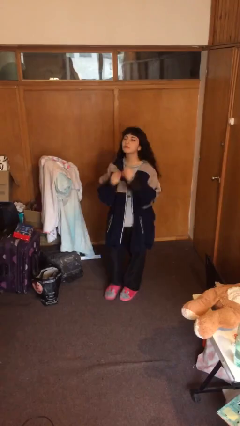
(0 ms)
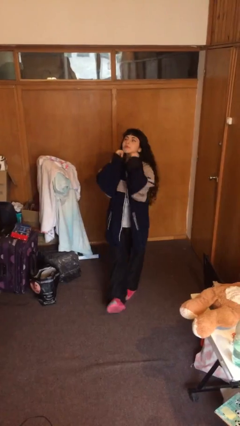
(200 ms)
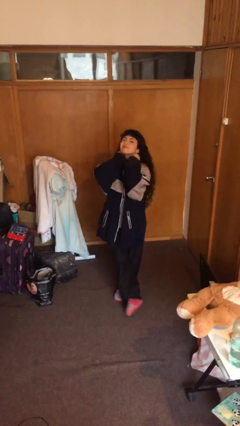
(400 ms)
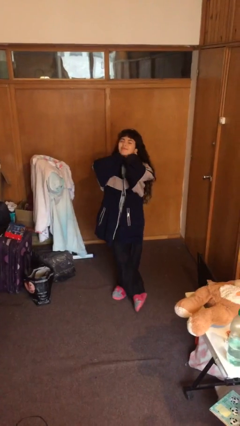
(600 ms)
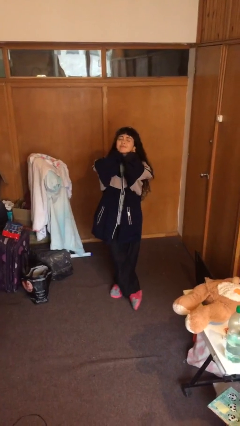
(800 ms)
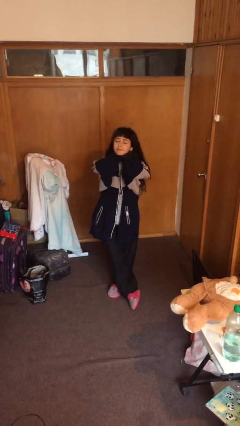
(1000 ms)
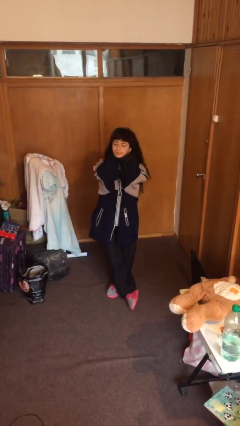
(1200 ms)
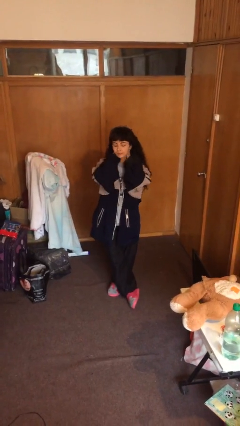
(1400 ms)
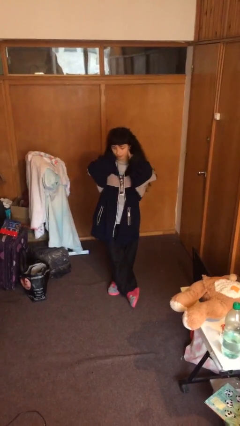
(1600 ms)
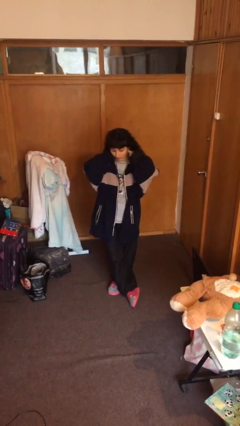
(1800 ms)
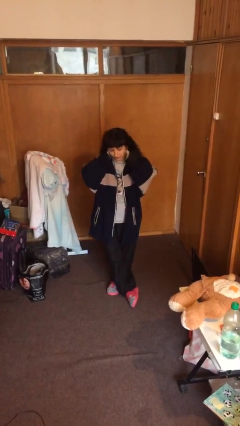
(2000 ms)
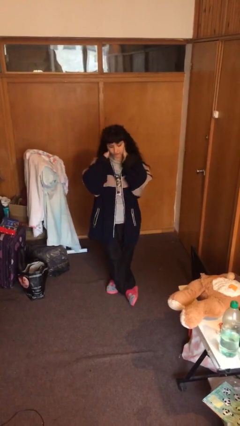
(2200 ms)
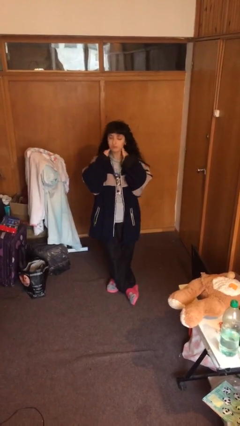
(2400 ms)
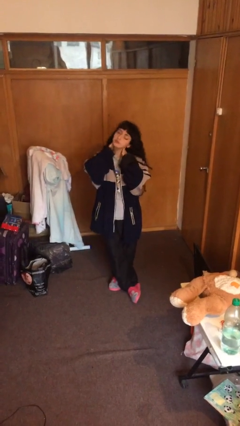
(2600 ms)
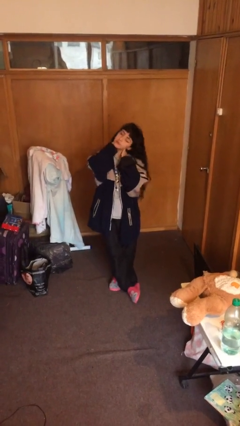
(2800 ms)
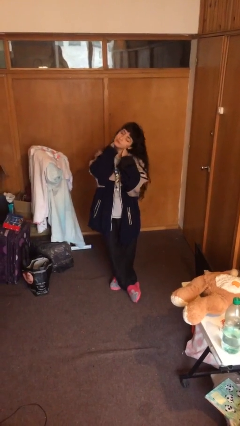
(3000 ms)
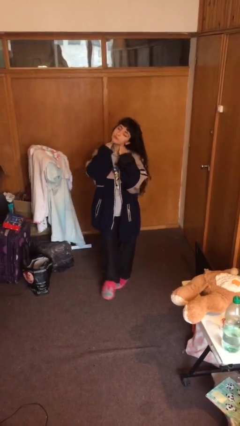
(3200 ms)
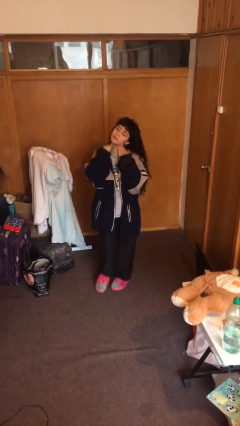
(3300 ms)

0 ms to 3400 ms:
person rubs neck

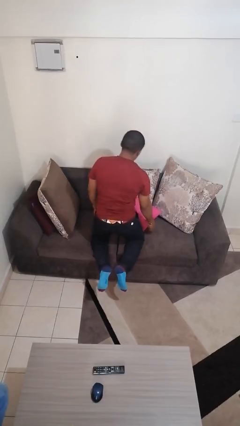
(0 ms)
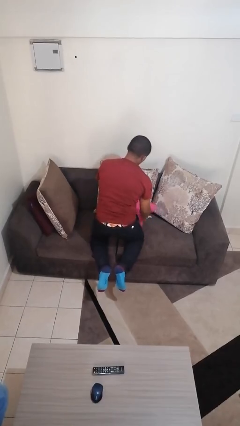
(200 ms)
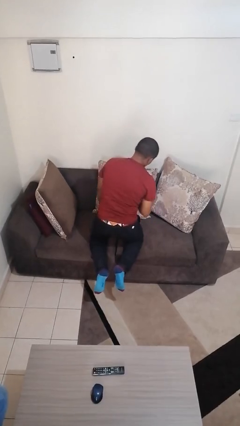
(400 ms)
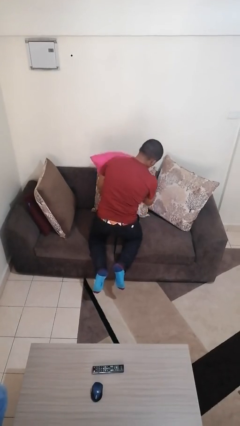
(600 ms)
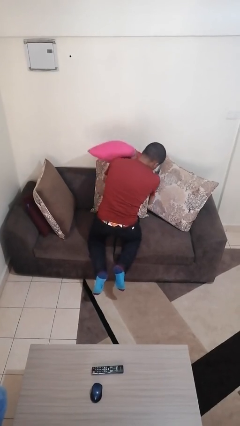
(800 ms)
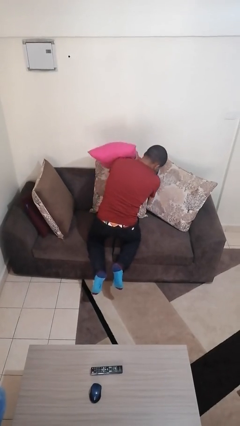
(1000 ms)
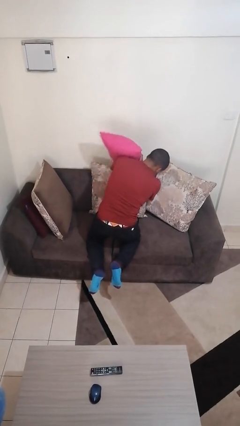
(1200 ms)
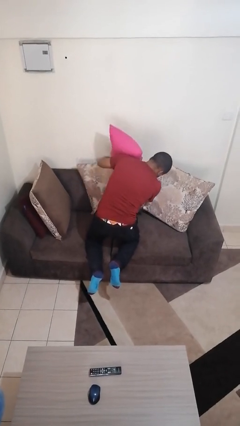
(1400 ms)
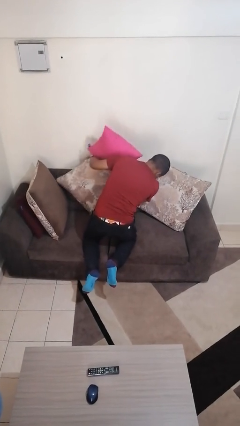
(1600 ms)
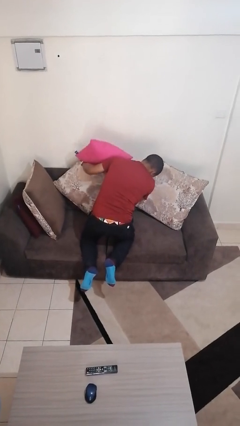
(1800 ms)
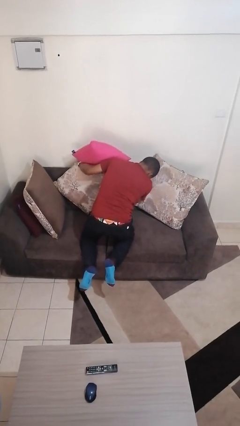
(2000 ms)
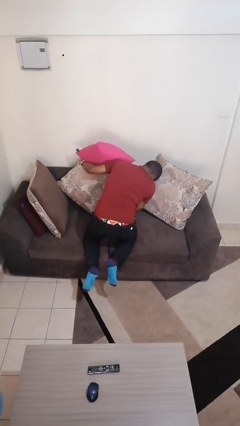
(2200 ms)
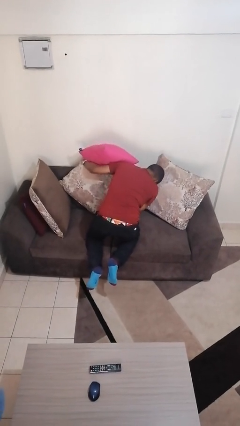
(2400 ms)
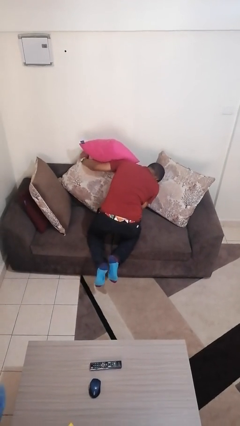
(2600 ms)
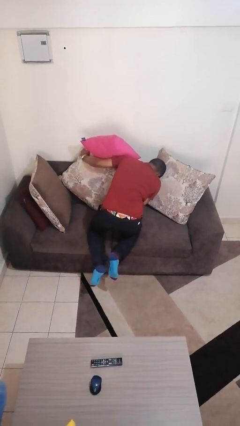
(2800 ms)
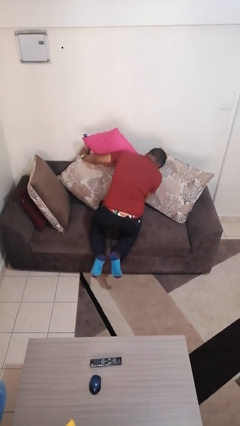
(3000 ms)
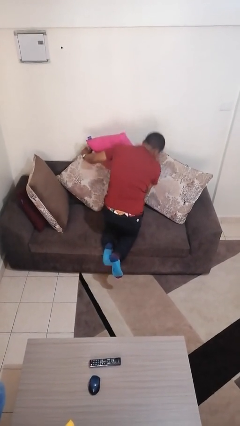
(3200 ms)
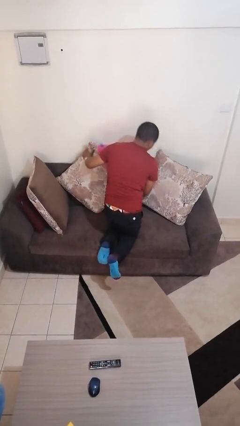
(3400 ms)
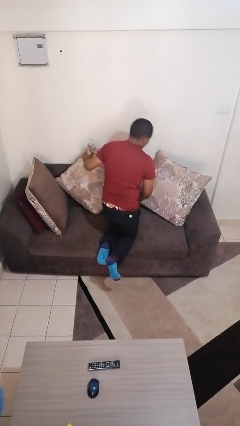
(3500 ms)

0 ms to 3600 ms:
person searches in couch

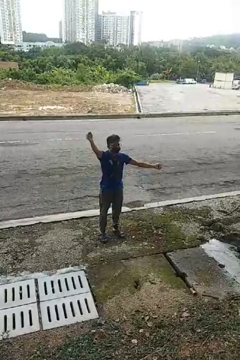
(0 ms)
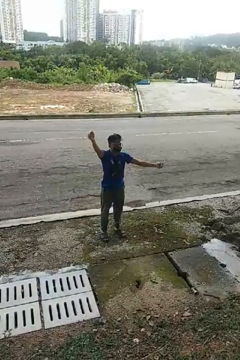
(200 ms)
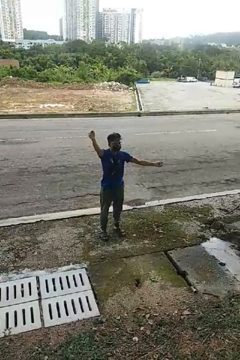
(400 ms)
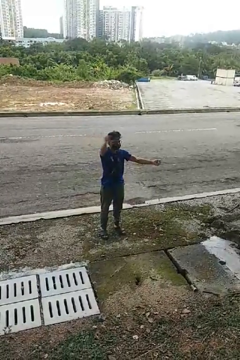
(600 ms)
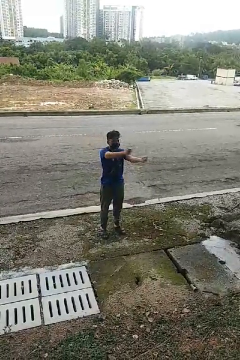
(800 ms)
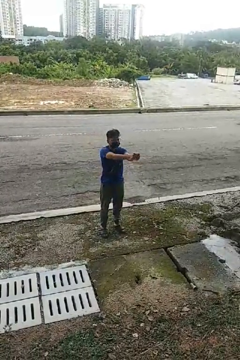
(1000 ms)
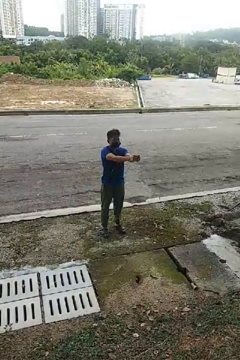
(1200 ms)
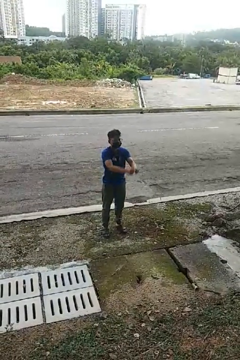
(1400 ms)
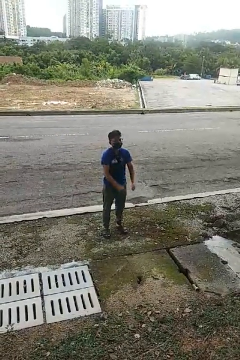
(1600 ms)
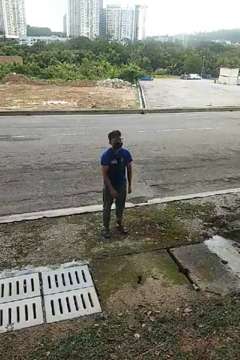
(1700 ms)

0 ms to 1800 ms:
person gestures zoom out

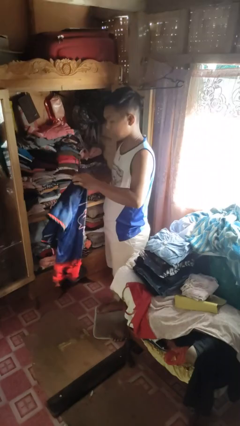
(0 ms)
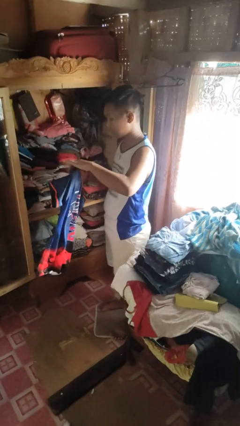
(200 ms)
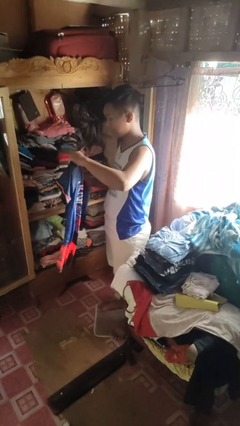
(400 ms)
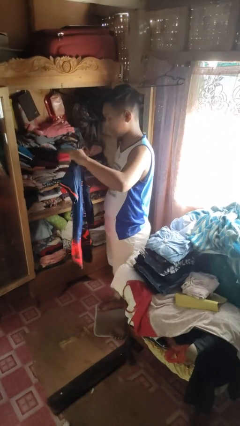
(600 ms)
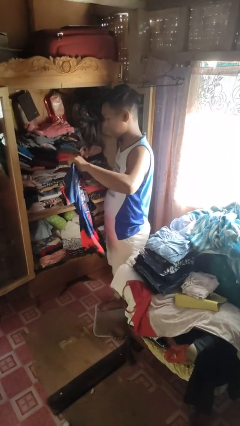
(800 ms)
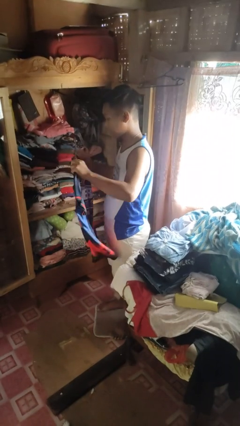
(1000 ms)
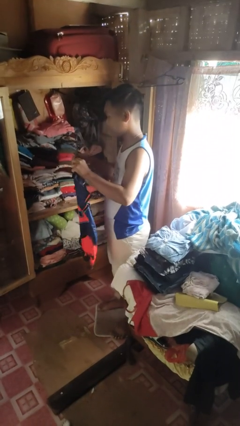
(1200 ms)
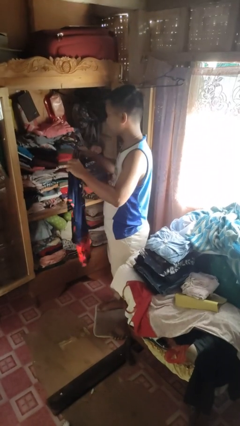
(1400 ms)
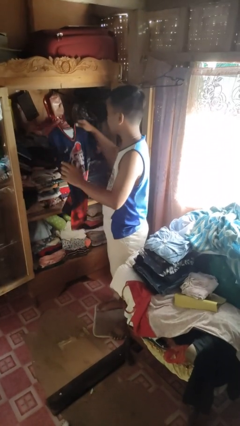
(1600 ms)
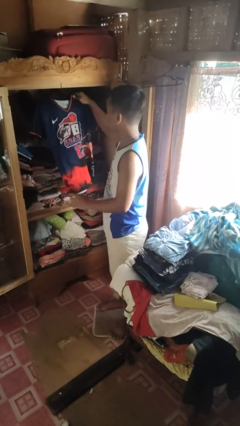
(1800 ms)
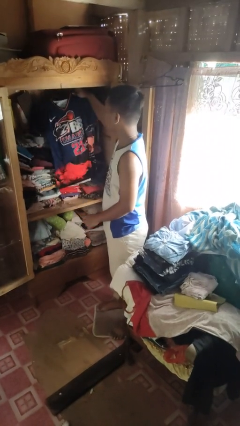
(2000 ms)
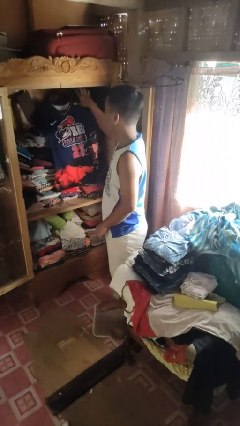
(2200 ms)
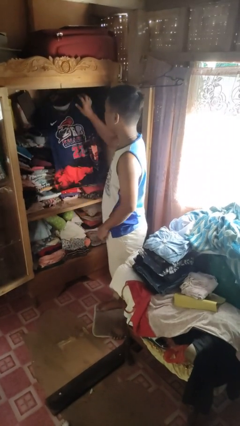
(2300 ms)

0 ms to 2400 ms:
person puts clothes into closet

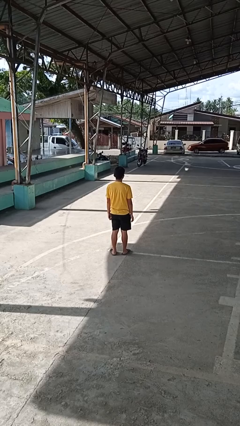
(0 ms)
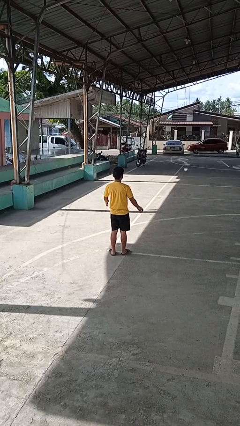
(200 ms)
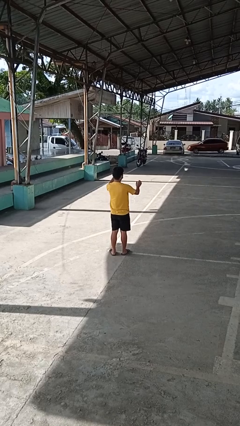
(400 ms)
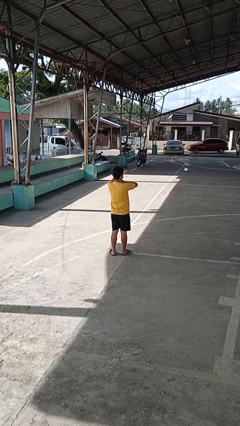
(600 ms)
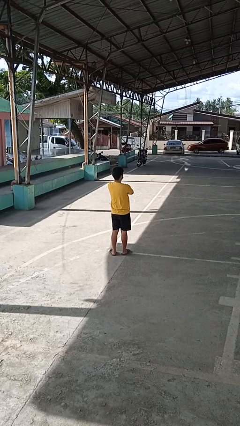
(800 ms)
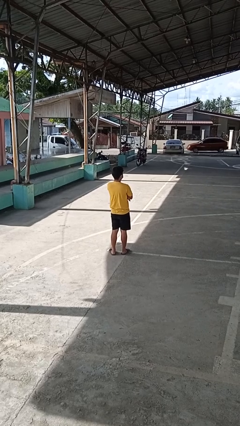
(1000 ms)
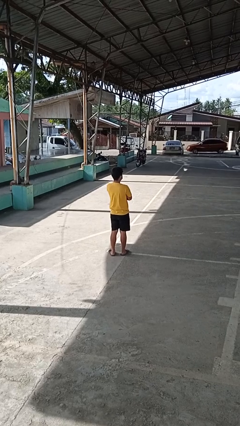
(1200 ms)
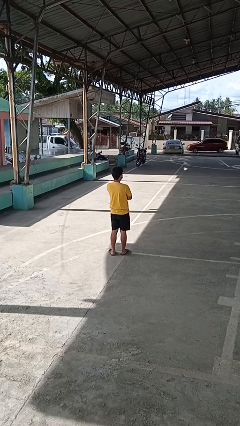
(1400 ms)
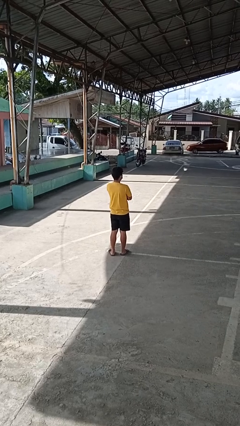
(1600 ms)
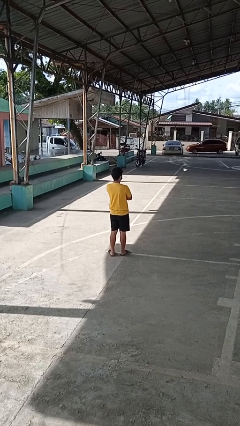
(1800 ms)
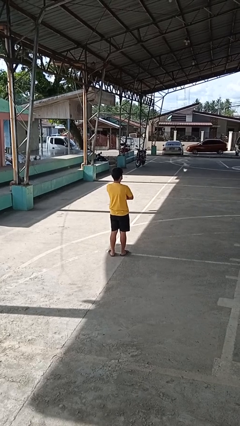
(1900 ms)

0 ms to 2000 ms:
person crosses arms

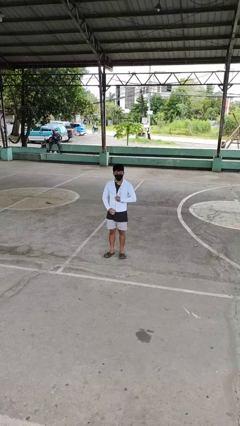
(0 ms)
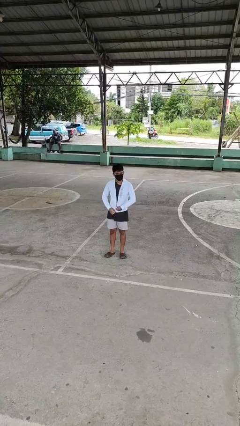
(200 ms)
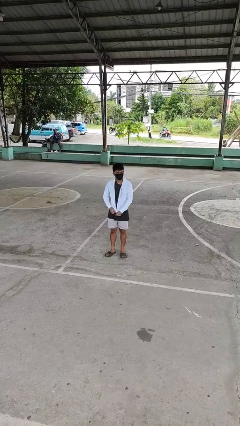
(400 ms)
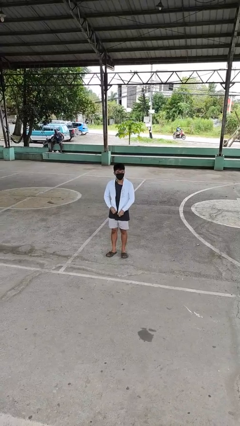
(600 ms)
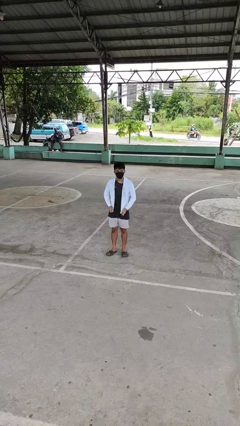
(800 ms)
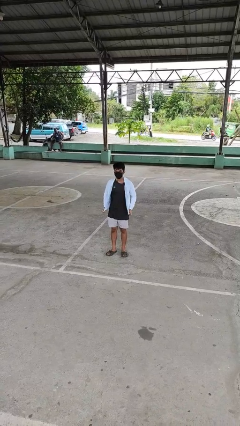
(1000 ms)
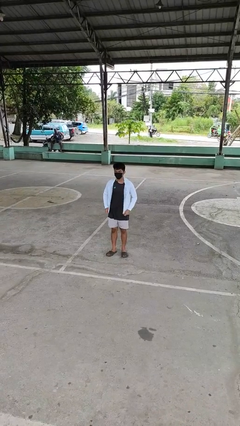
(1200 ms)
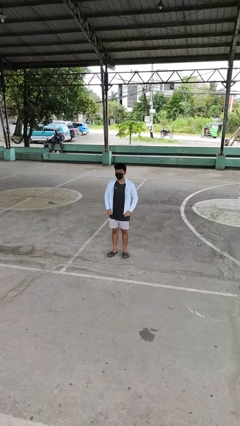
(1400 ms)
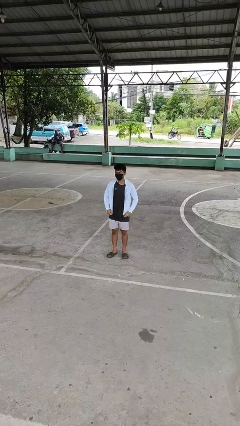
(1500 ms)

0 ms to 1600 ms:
person unzips jacket

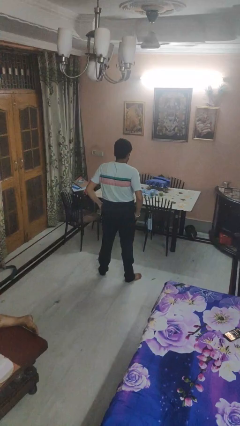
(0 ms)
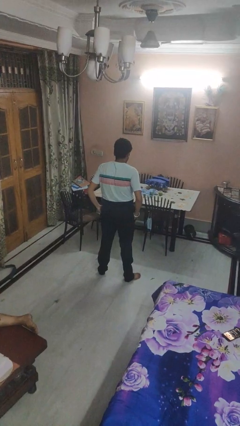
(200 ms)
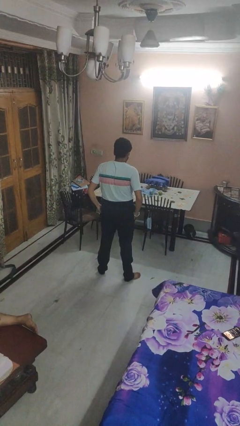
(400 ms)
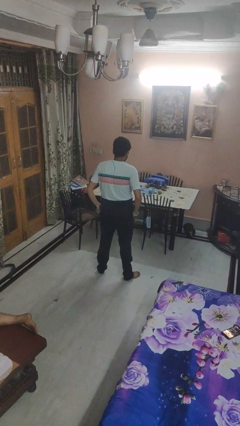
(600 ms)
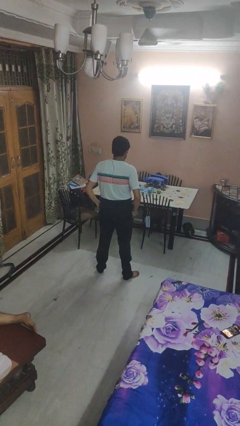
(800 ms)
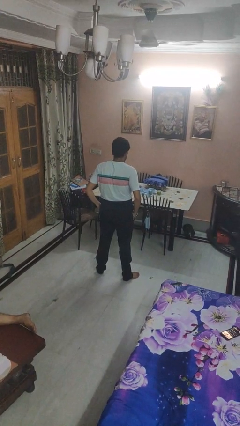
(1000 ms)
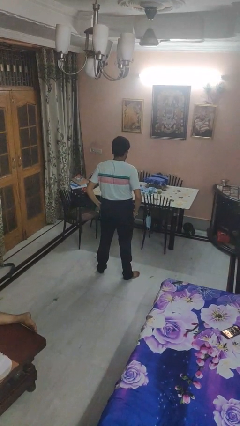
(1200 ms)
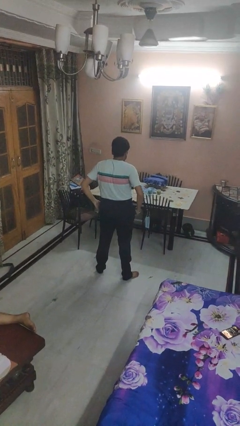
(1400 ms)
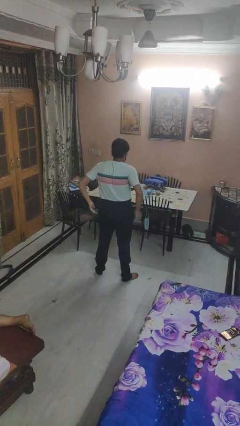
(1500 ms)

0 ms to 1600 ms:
person puts hands in back pockets

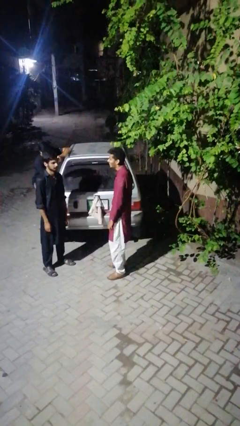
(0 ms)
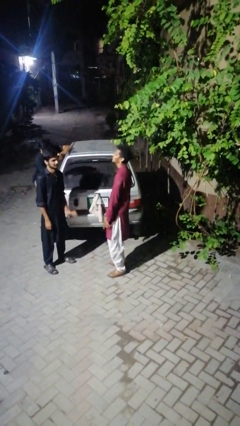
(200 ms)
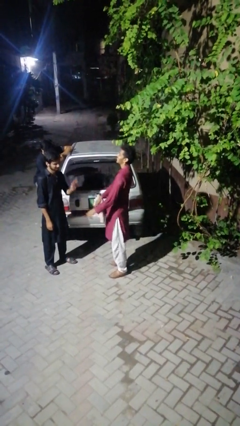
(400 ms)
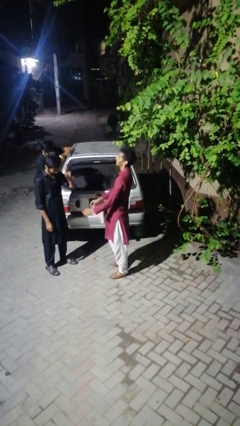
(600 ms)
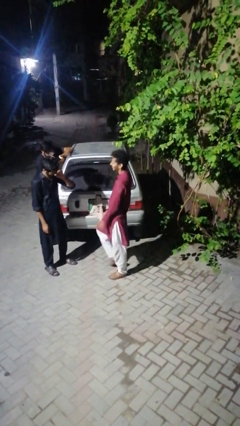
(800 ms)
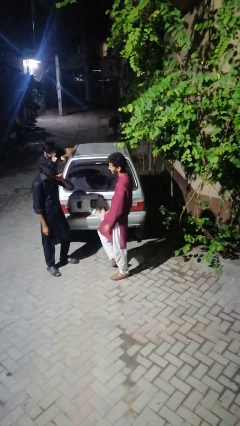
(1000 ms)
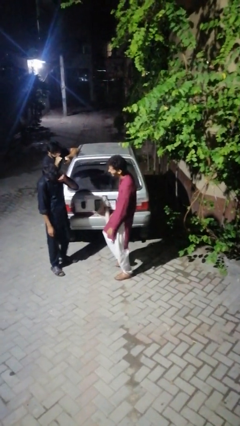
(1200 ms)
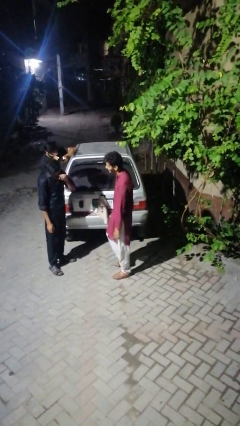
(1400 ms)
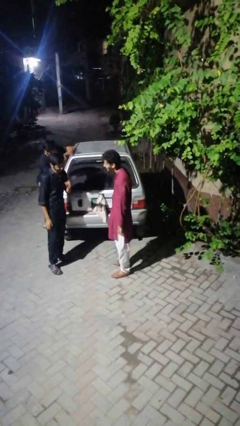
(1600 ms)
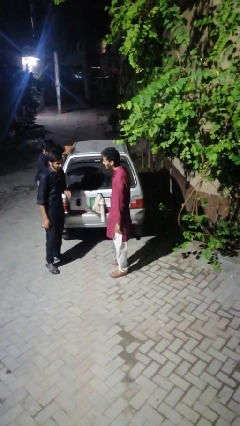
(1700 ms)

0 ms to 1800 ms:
person laughs with person
